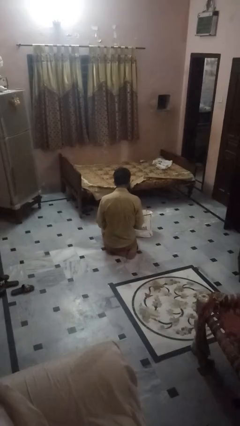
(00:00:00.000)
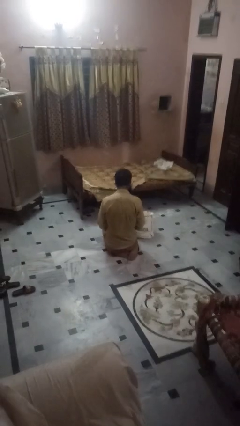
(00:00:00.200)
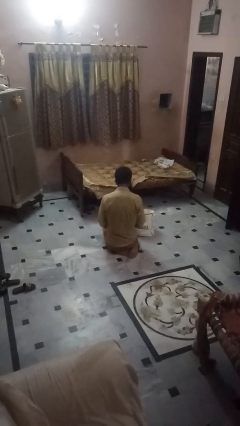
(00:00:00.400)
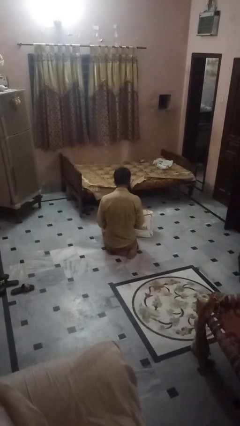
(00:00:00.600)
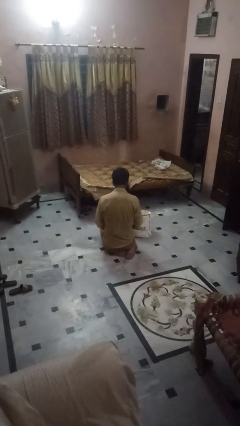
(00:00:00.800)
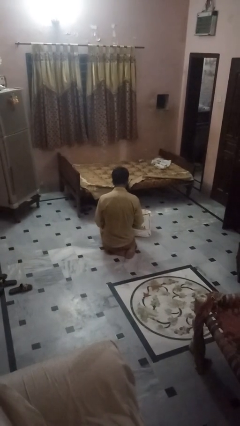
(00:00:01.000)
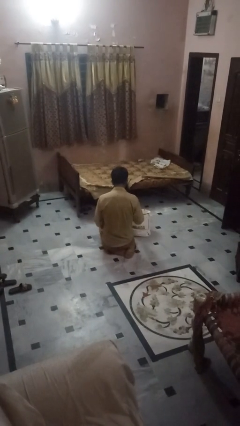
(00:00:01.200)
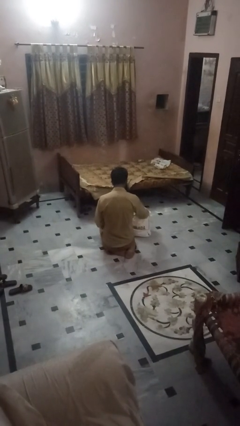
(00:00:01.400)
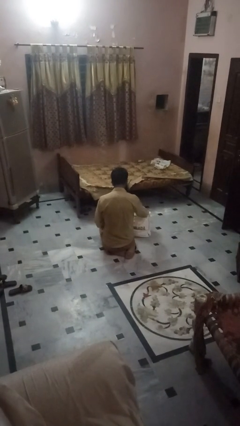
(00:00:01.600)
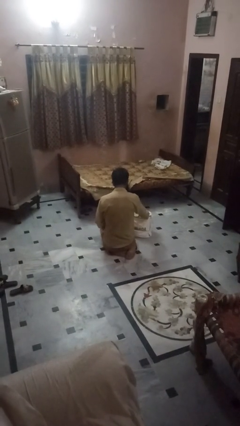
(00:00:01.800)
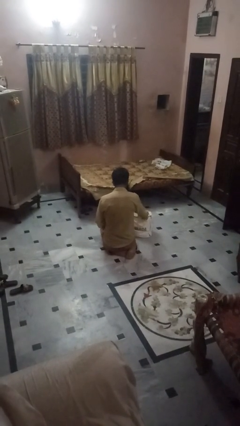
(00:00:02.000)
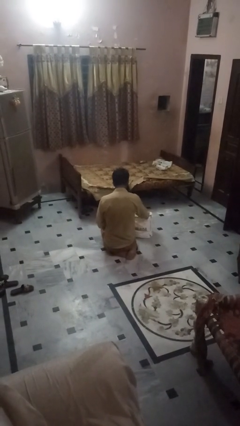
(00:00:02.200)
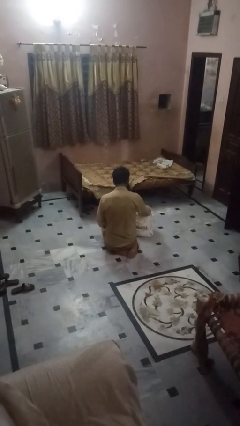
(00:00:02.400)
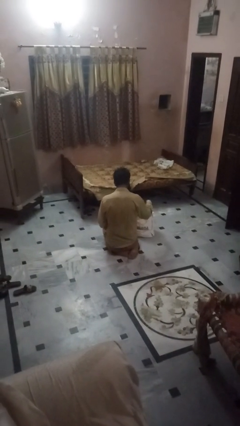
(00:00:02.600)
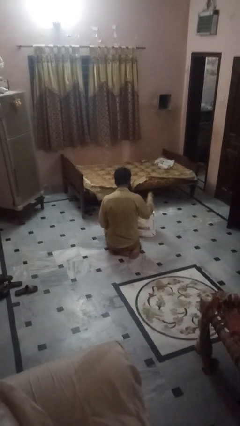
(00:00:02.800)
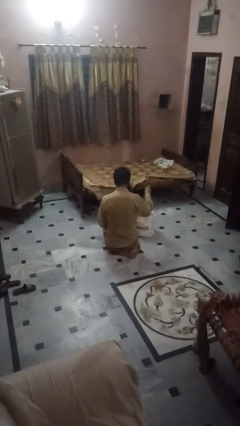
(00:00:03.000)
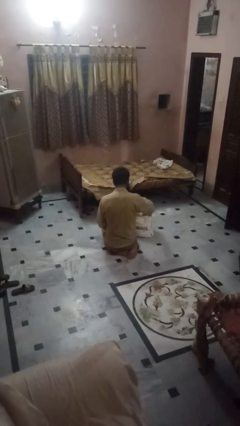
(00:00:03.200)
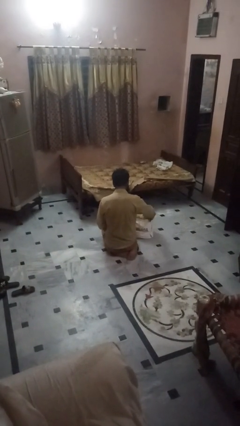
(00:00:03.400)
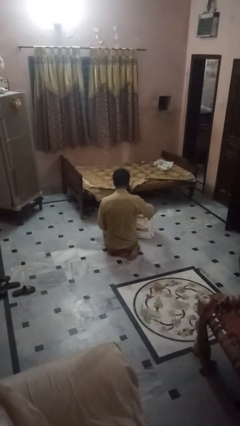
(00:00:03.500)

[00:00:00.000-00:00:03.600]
person takes object from bag

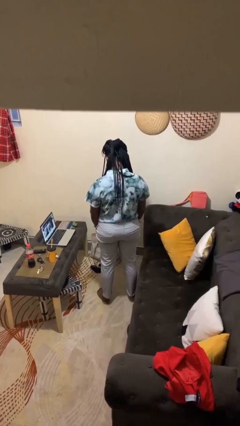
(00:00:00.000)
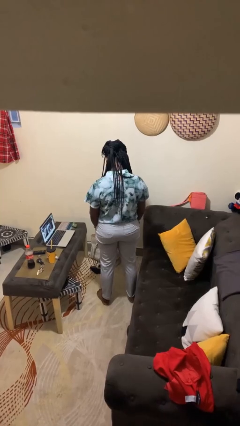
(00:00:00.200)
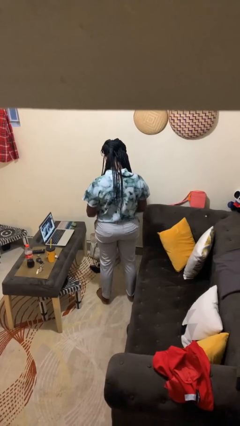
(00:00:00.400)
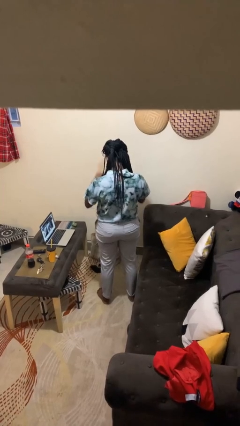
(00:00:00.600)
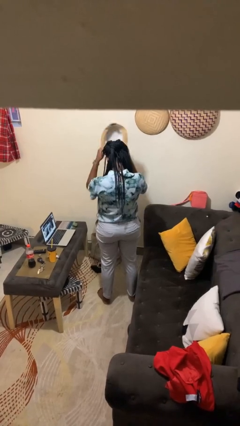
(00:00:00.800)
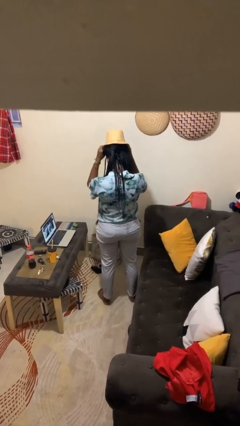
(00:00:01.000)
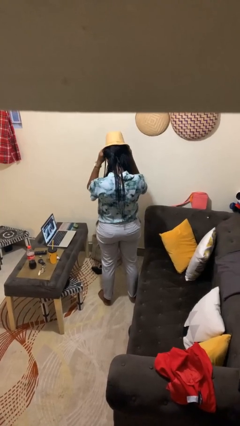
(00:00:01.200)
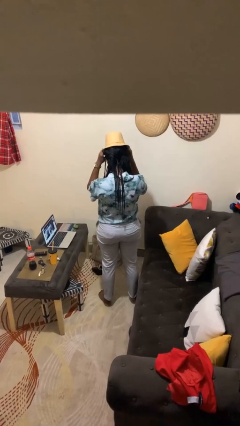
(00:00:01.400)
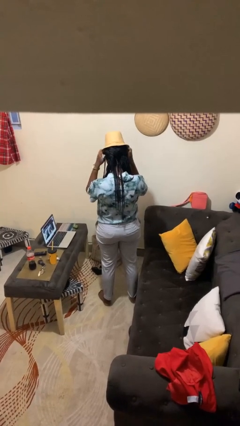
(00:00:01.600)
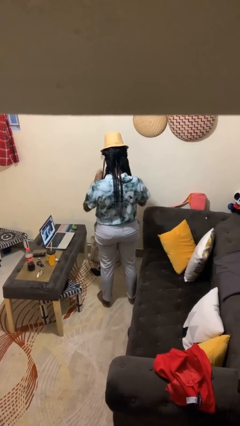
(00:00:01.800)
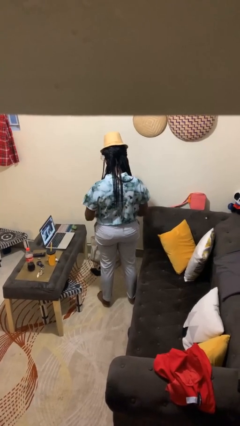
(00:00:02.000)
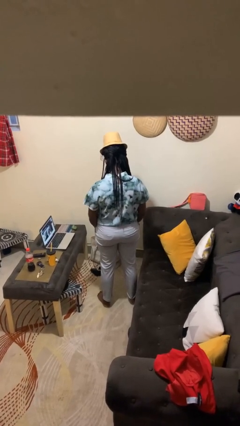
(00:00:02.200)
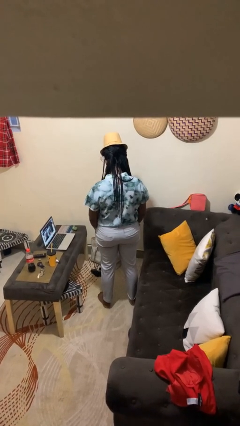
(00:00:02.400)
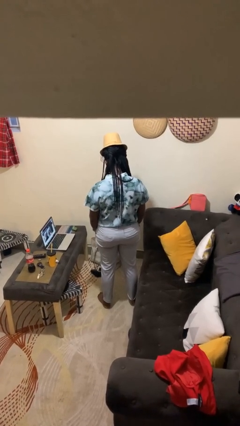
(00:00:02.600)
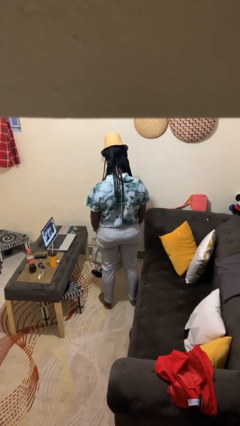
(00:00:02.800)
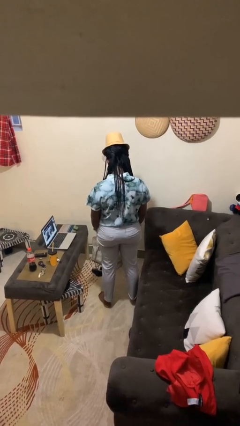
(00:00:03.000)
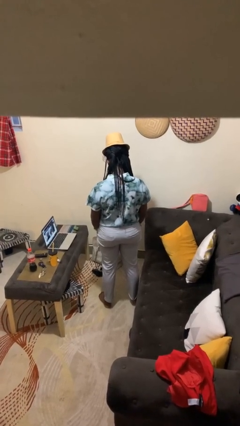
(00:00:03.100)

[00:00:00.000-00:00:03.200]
person puts on hat

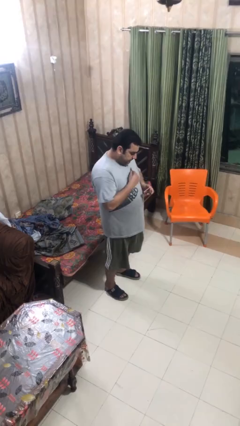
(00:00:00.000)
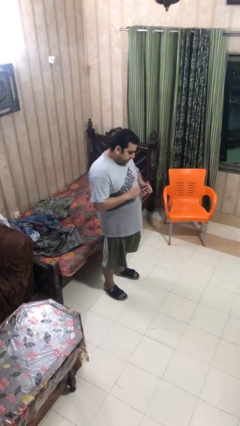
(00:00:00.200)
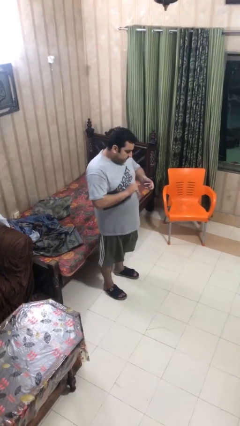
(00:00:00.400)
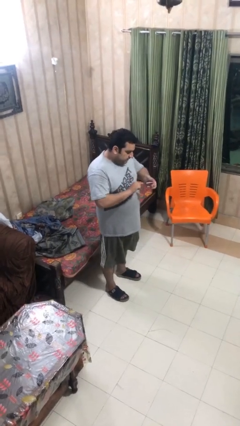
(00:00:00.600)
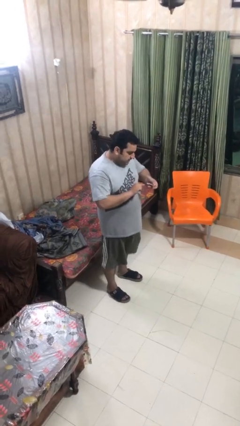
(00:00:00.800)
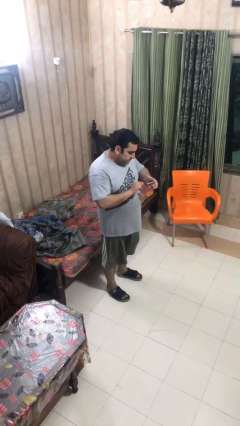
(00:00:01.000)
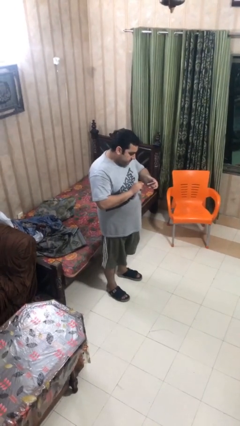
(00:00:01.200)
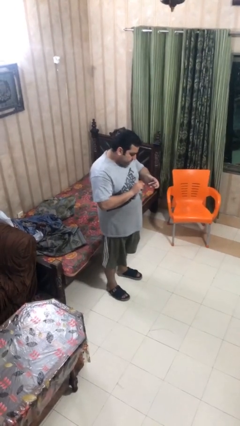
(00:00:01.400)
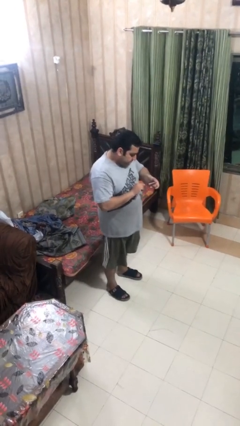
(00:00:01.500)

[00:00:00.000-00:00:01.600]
person clips fingernails

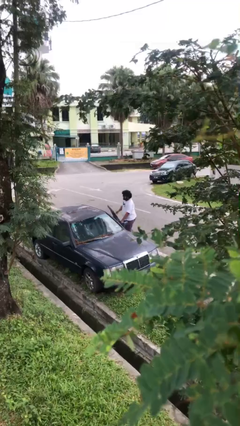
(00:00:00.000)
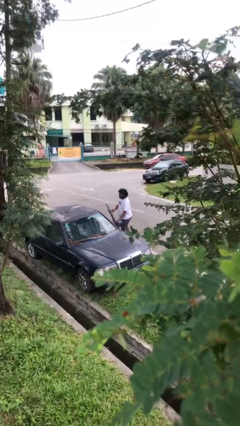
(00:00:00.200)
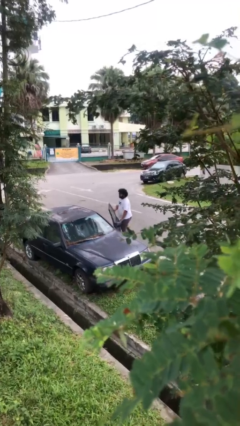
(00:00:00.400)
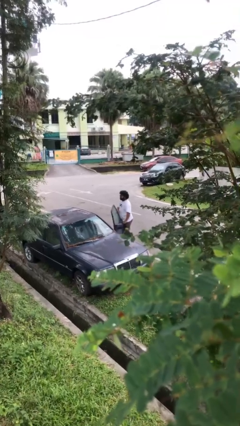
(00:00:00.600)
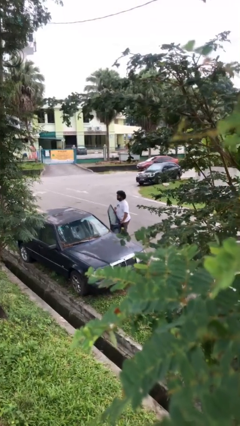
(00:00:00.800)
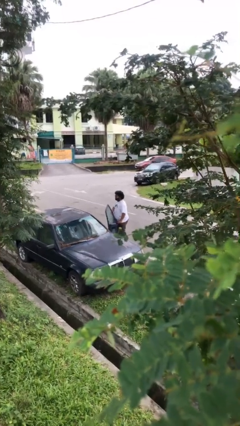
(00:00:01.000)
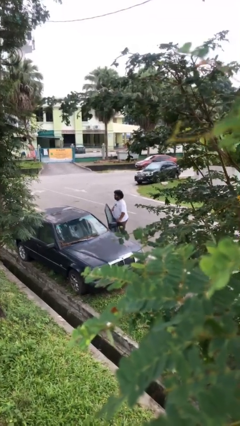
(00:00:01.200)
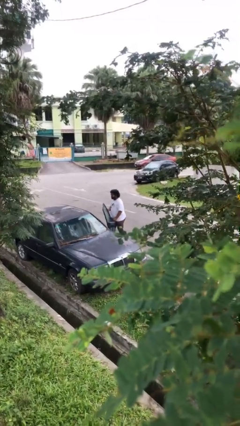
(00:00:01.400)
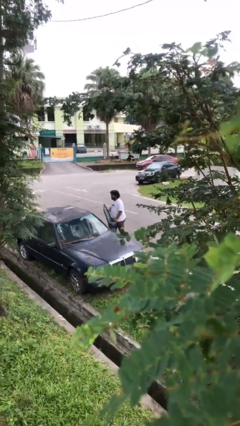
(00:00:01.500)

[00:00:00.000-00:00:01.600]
person opens car door

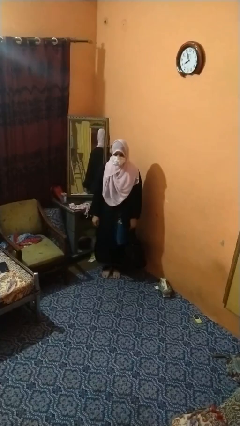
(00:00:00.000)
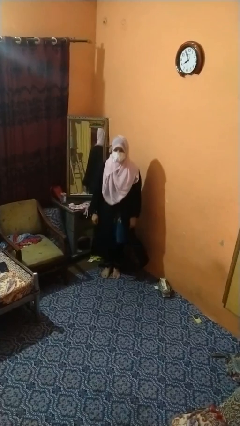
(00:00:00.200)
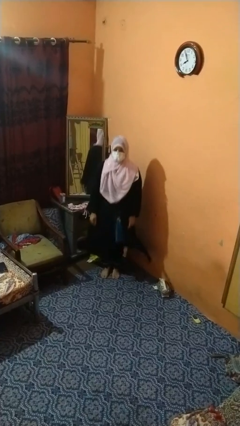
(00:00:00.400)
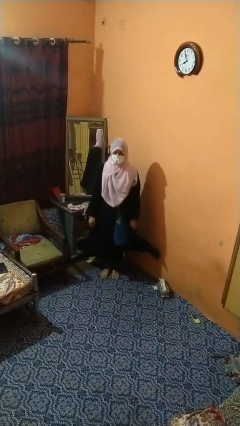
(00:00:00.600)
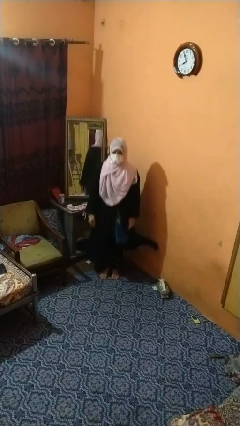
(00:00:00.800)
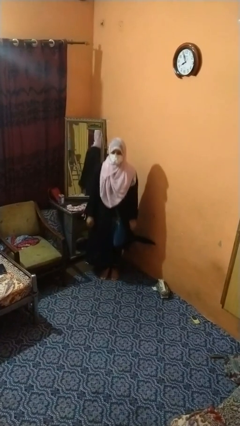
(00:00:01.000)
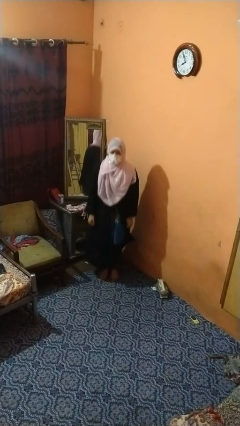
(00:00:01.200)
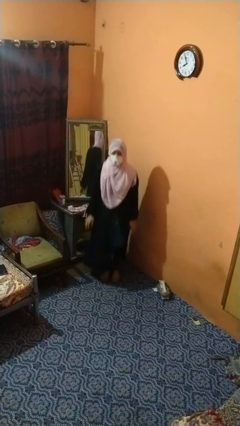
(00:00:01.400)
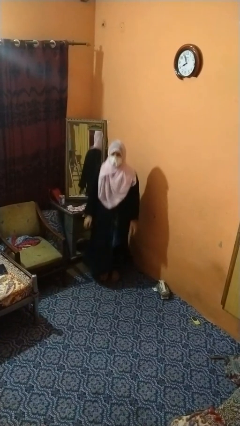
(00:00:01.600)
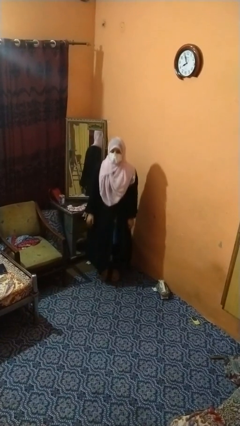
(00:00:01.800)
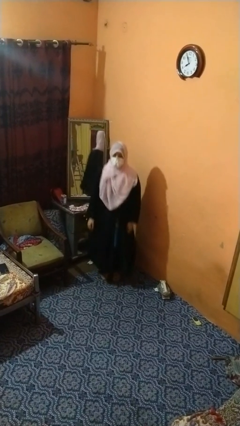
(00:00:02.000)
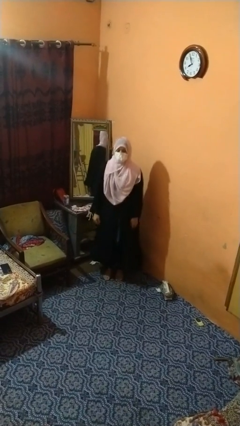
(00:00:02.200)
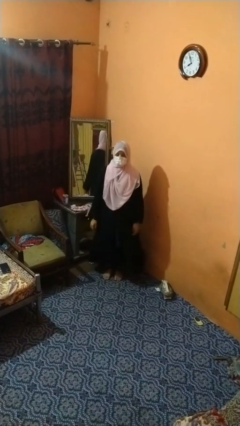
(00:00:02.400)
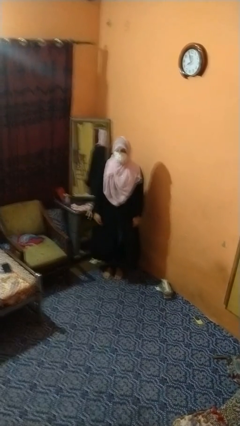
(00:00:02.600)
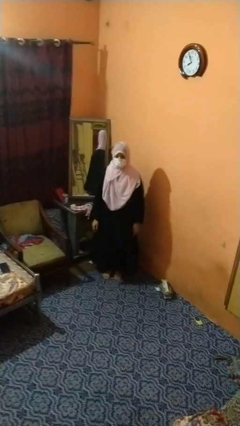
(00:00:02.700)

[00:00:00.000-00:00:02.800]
person jumps

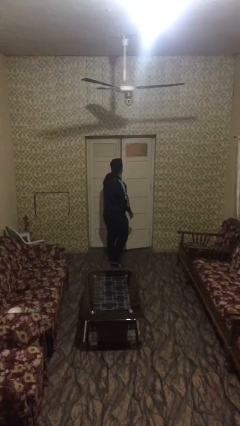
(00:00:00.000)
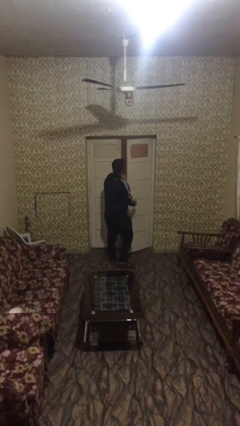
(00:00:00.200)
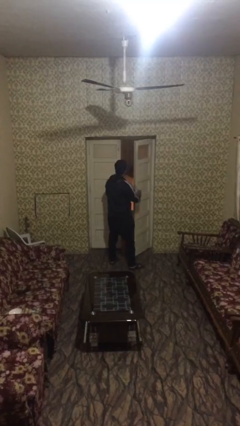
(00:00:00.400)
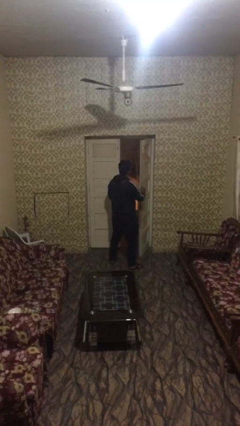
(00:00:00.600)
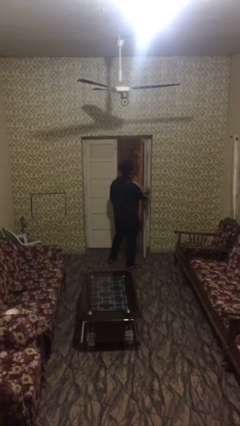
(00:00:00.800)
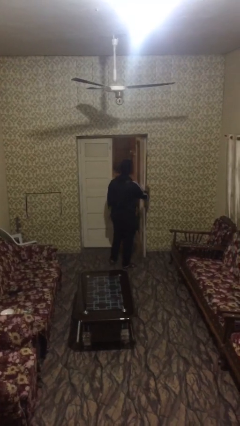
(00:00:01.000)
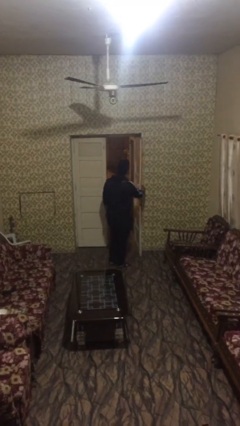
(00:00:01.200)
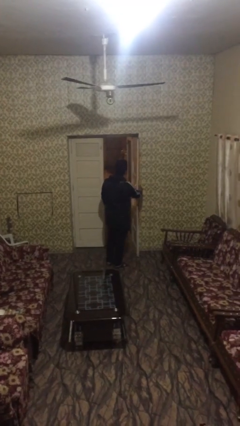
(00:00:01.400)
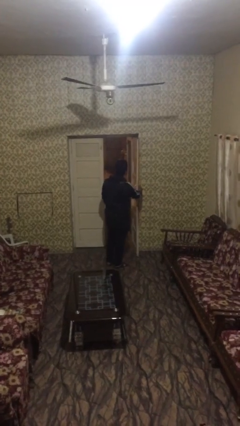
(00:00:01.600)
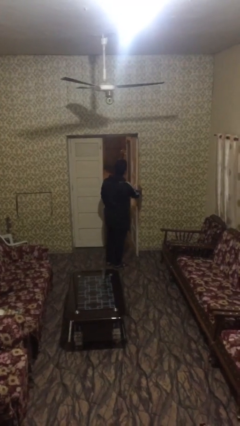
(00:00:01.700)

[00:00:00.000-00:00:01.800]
person opens facility door

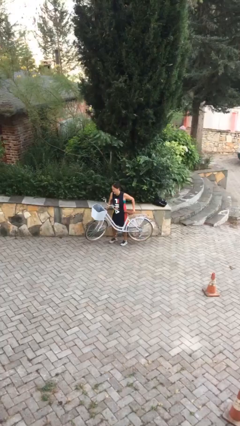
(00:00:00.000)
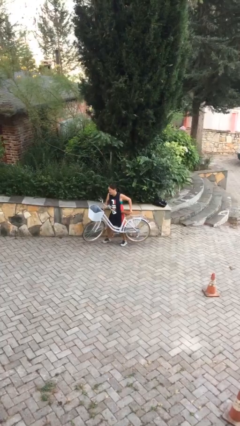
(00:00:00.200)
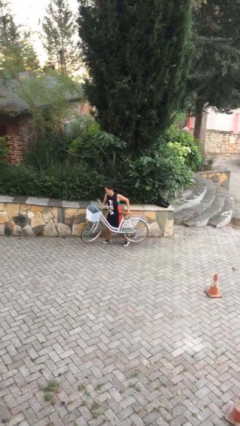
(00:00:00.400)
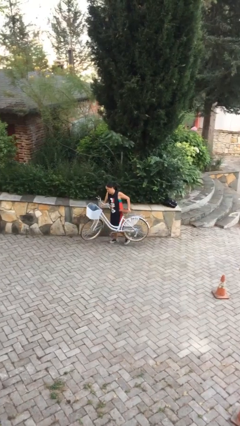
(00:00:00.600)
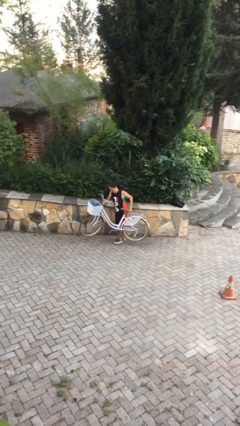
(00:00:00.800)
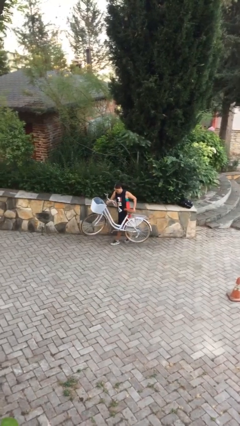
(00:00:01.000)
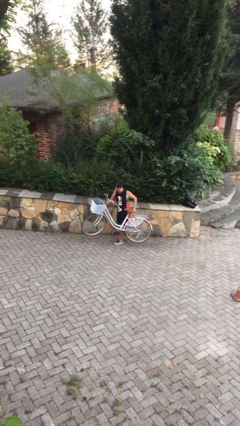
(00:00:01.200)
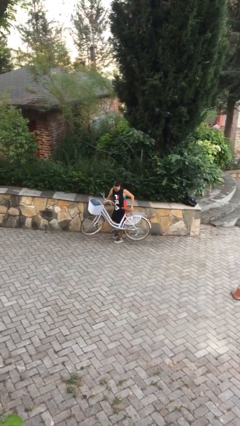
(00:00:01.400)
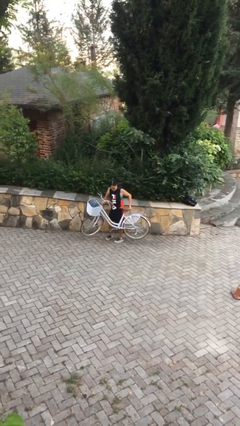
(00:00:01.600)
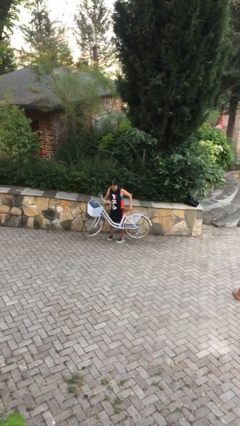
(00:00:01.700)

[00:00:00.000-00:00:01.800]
person carries bicycle

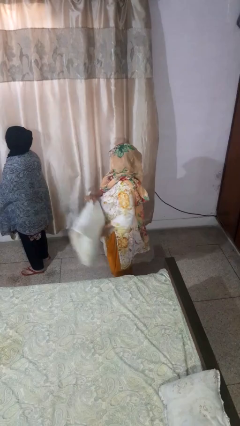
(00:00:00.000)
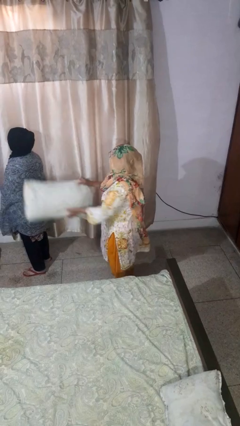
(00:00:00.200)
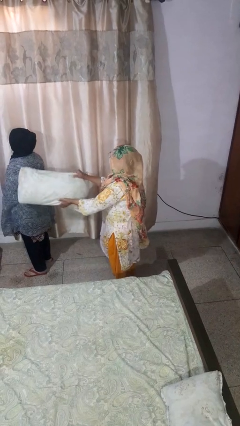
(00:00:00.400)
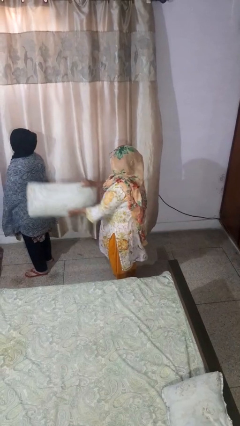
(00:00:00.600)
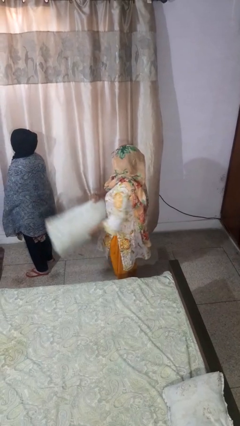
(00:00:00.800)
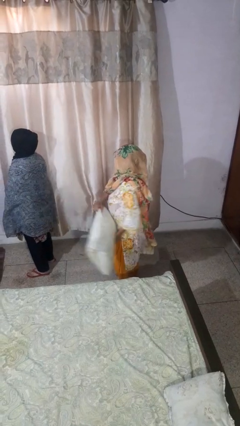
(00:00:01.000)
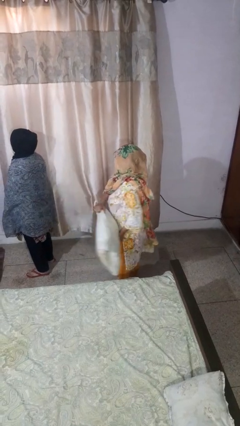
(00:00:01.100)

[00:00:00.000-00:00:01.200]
person hits person with pillow
